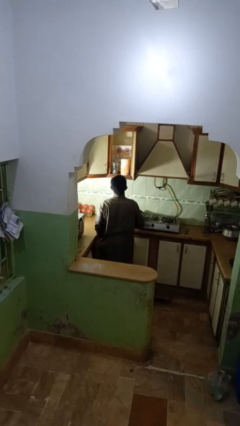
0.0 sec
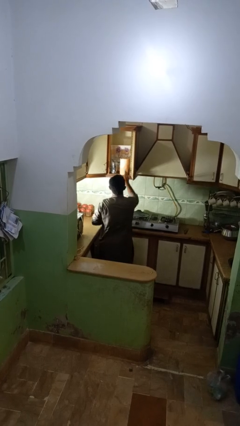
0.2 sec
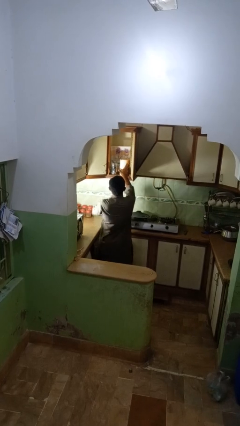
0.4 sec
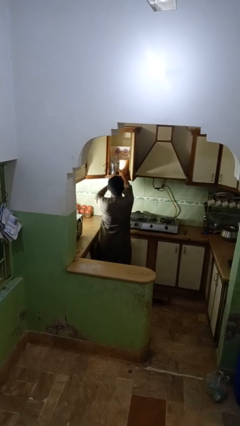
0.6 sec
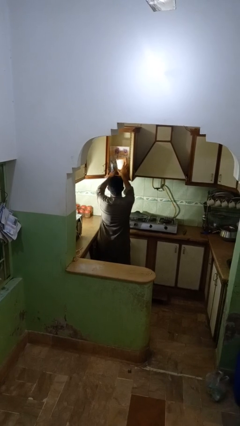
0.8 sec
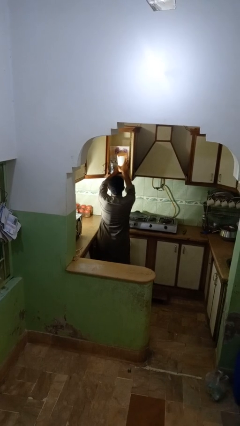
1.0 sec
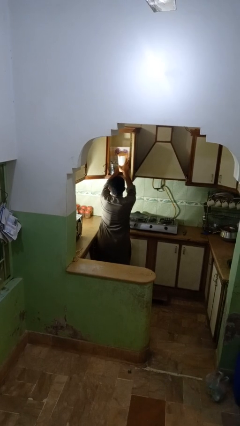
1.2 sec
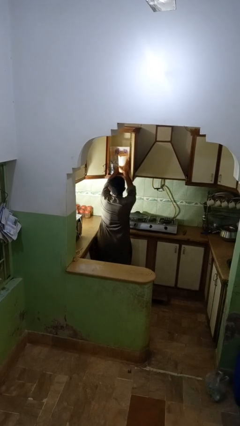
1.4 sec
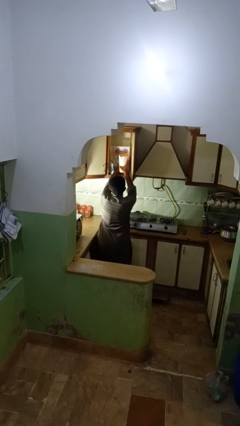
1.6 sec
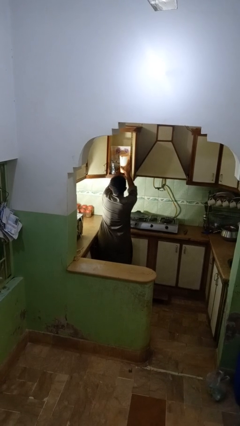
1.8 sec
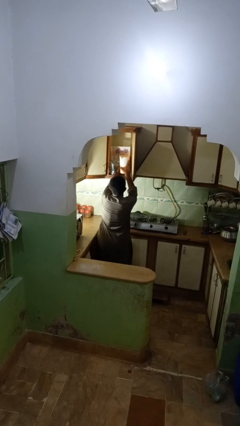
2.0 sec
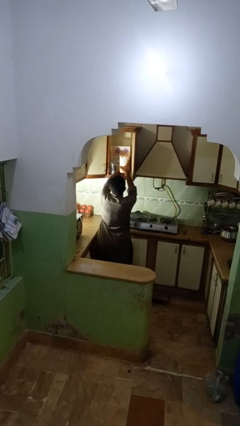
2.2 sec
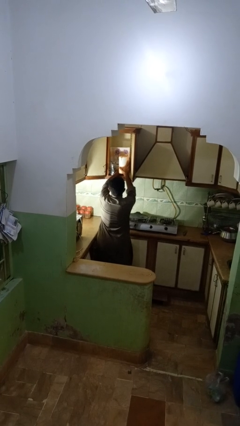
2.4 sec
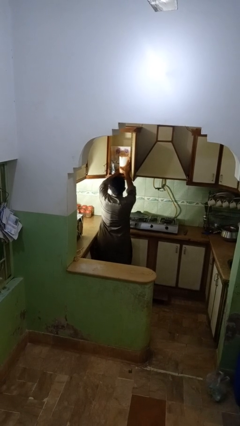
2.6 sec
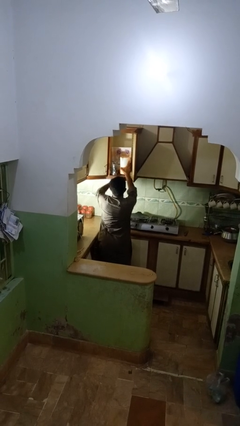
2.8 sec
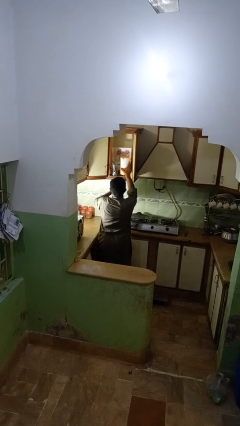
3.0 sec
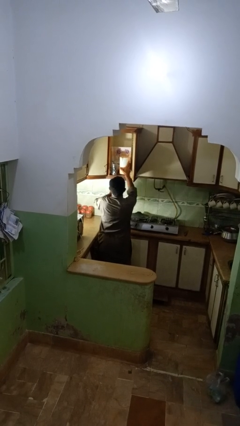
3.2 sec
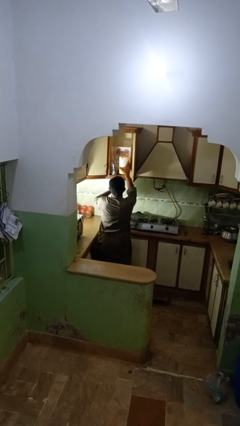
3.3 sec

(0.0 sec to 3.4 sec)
person searches in kitchen drawer

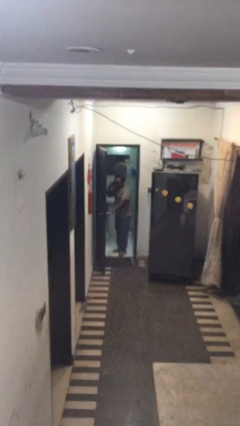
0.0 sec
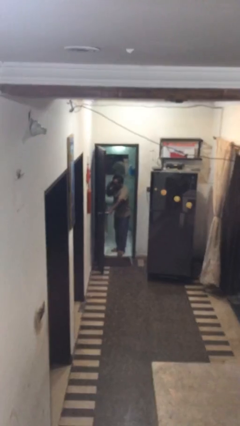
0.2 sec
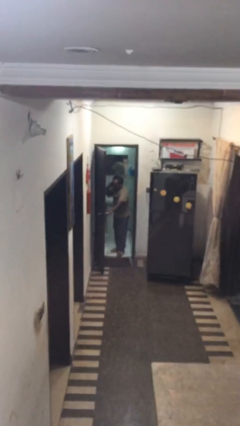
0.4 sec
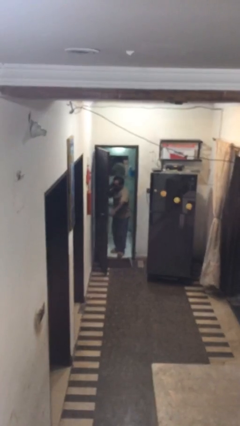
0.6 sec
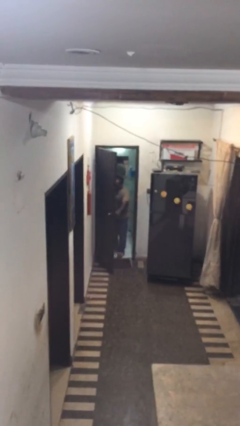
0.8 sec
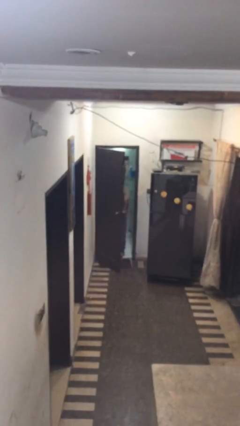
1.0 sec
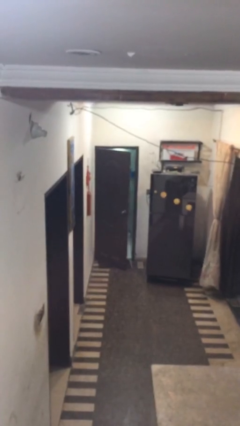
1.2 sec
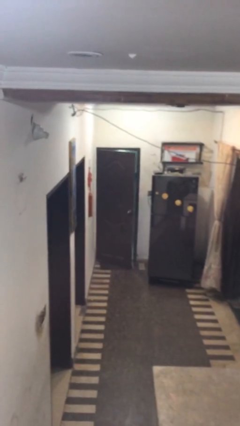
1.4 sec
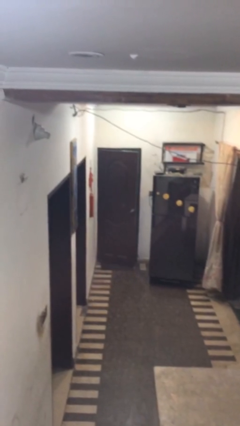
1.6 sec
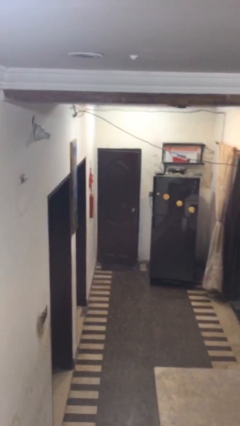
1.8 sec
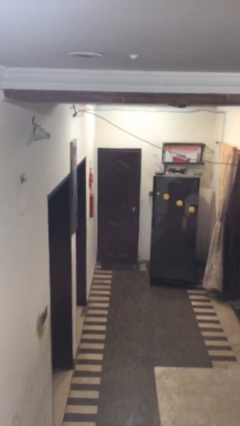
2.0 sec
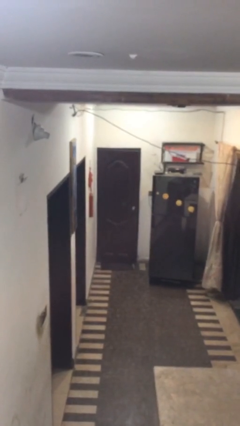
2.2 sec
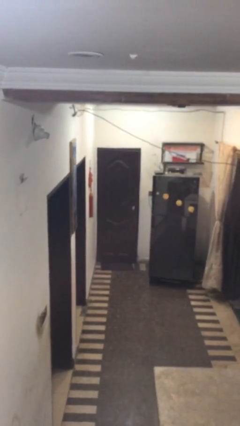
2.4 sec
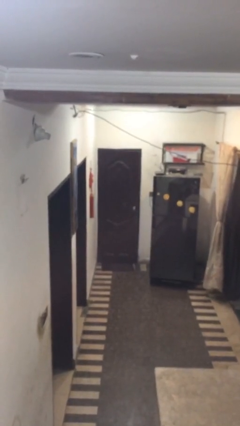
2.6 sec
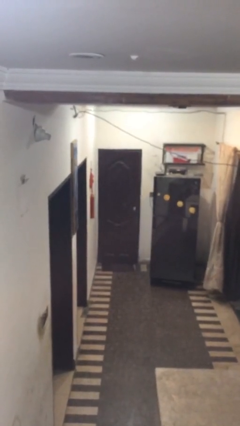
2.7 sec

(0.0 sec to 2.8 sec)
person closes facility door

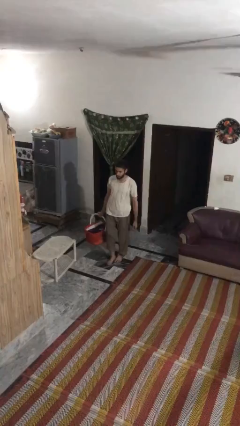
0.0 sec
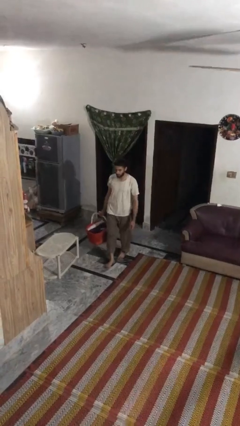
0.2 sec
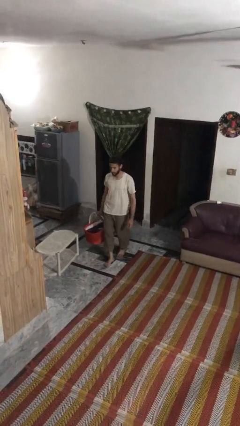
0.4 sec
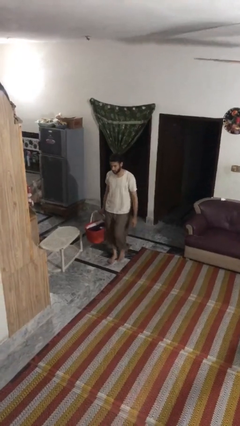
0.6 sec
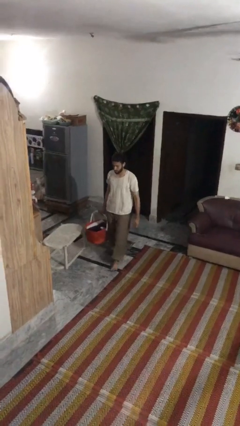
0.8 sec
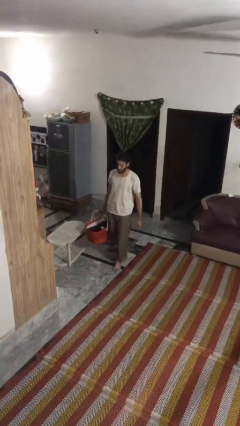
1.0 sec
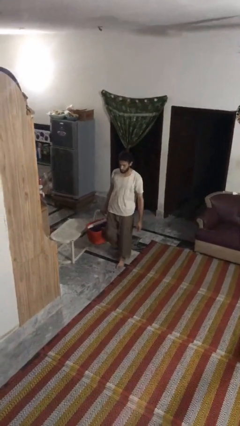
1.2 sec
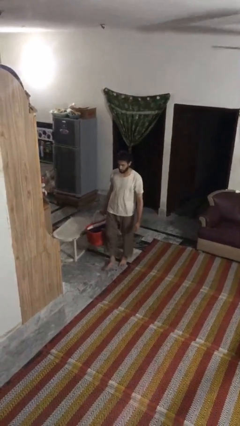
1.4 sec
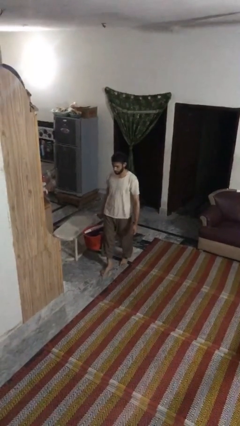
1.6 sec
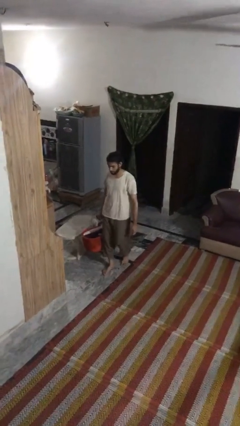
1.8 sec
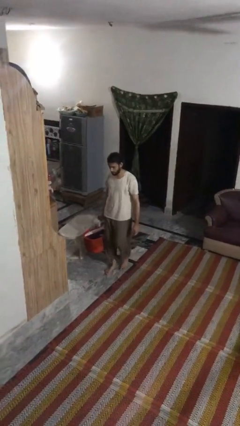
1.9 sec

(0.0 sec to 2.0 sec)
person carries laundry basket

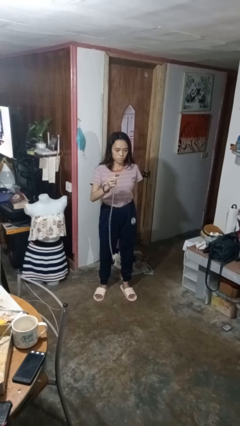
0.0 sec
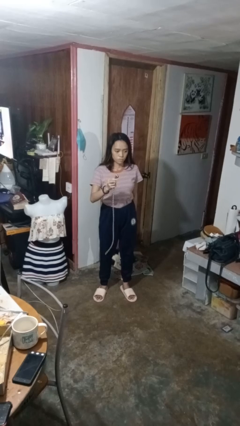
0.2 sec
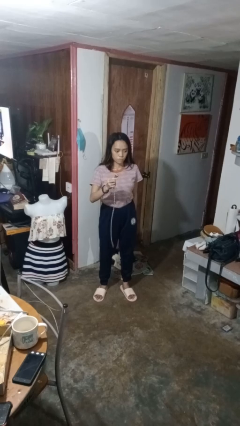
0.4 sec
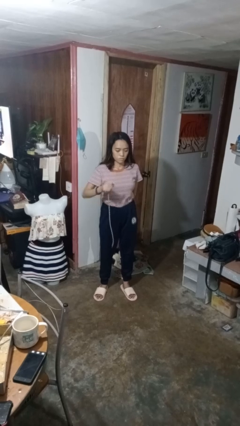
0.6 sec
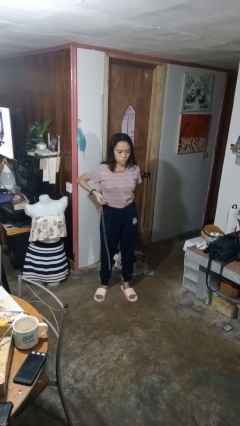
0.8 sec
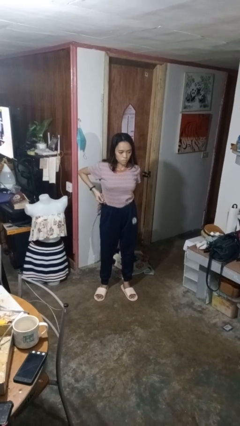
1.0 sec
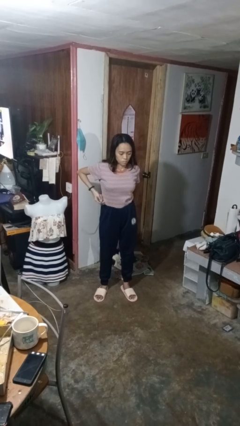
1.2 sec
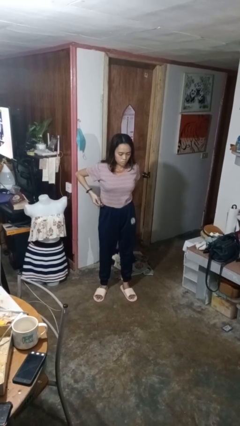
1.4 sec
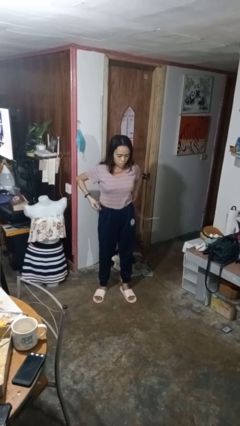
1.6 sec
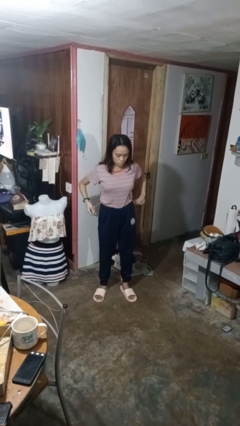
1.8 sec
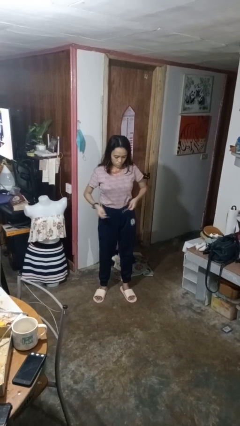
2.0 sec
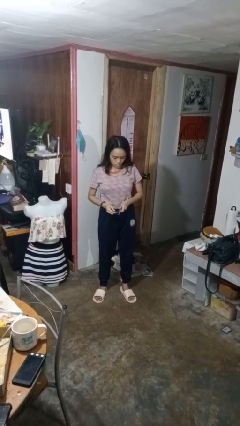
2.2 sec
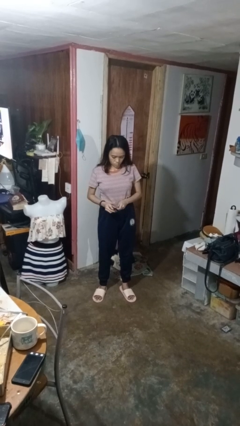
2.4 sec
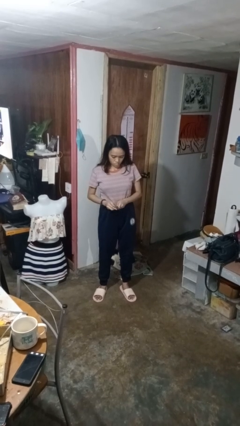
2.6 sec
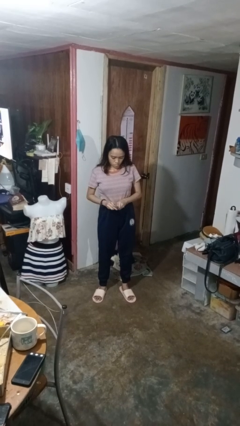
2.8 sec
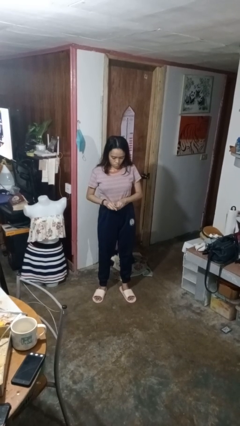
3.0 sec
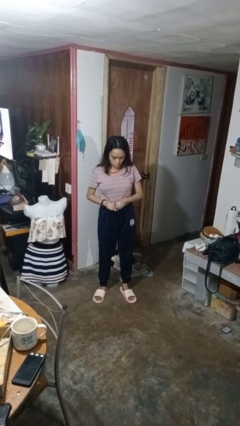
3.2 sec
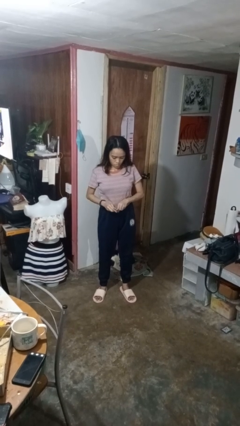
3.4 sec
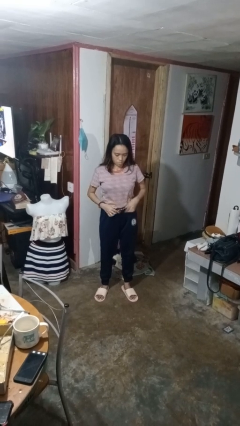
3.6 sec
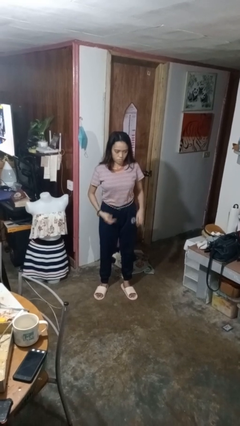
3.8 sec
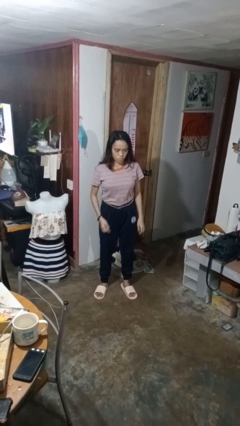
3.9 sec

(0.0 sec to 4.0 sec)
person puts on belt

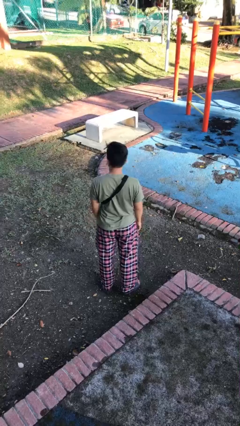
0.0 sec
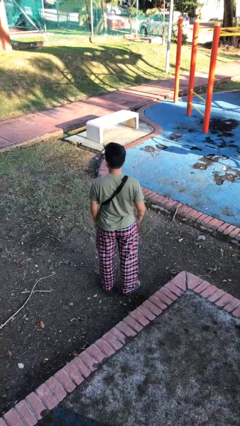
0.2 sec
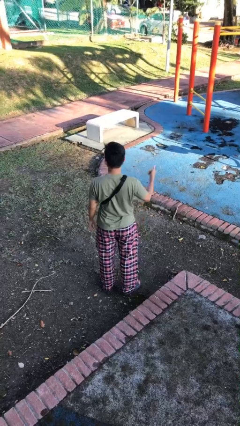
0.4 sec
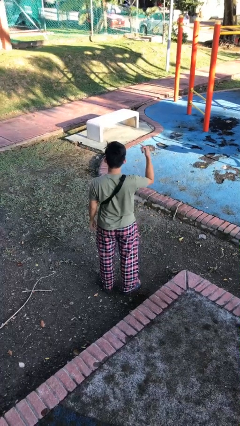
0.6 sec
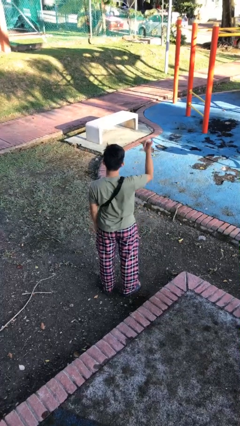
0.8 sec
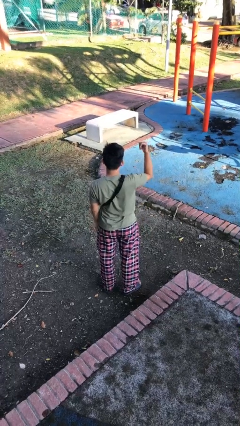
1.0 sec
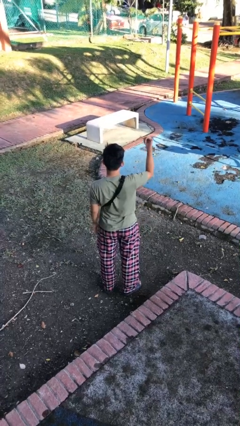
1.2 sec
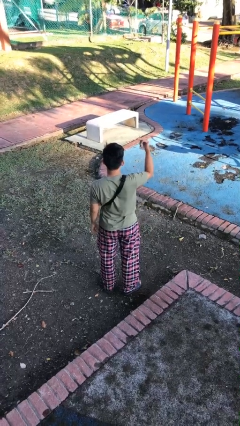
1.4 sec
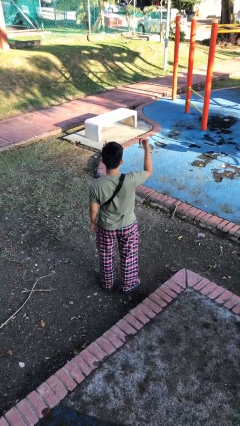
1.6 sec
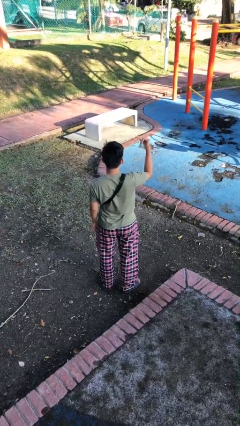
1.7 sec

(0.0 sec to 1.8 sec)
person gestures hang loose

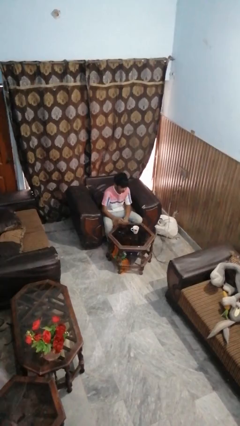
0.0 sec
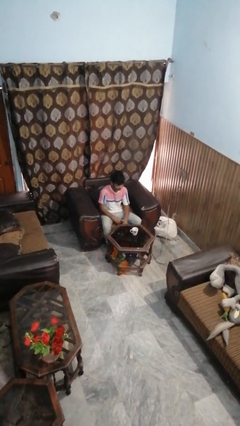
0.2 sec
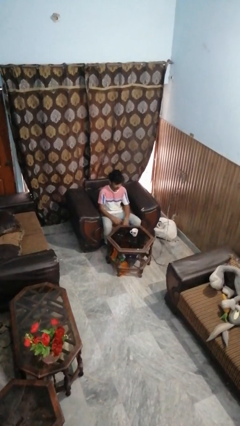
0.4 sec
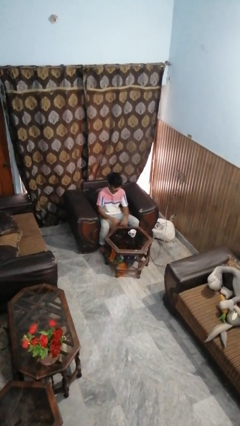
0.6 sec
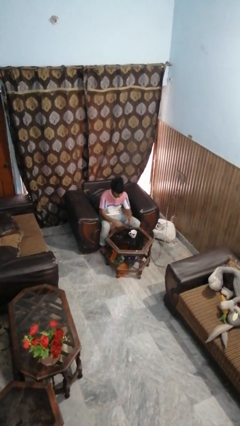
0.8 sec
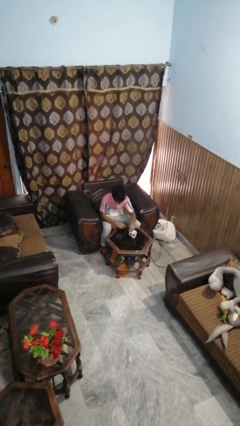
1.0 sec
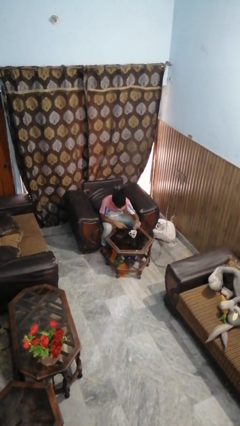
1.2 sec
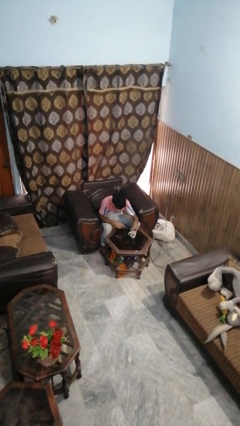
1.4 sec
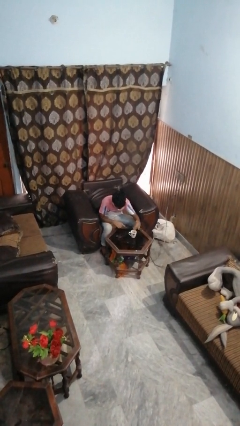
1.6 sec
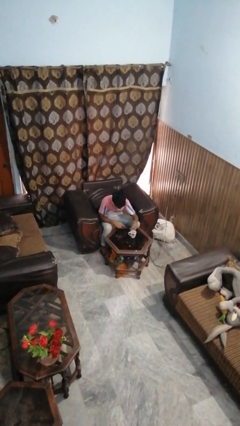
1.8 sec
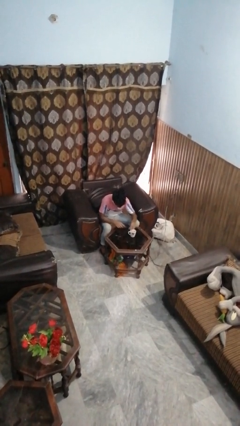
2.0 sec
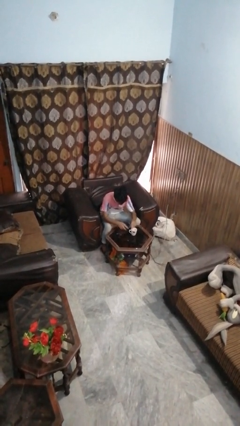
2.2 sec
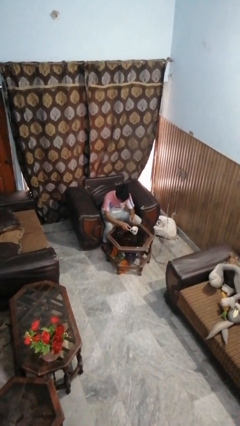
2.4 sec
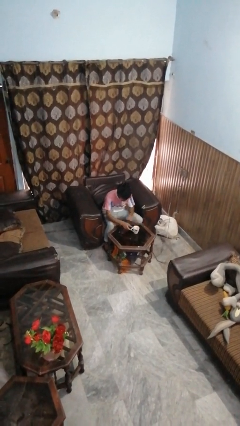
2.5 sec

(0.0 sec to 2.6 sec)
person stirs mug

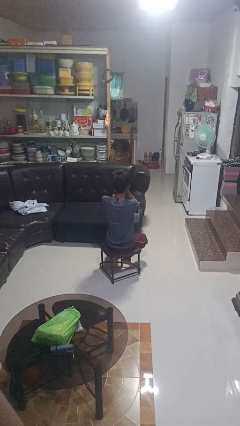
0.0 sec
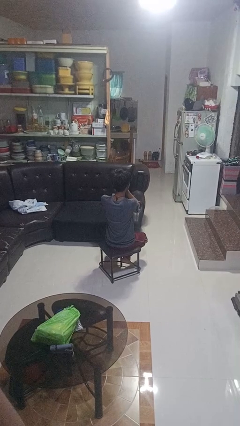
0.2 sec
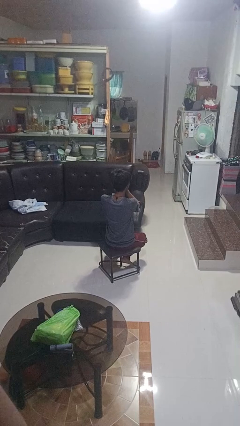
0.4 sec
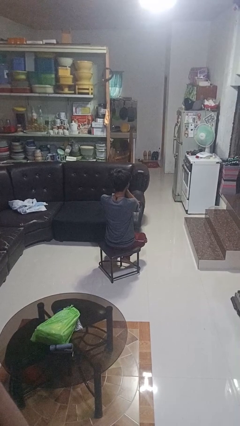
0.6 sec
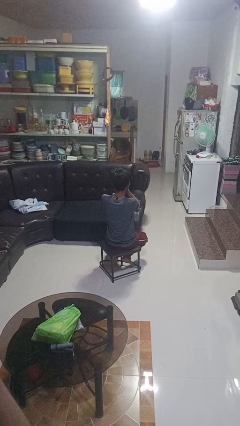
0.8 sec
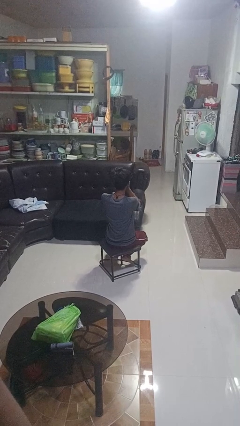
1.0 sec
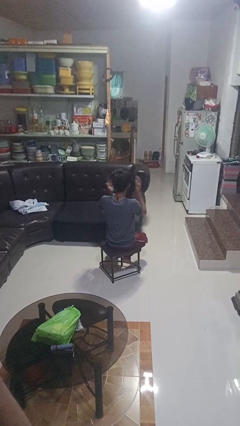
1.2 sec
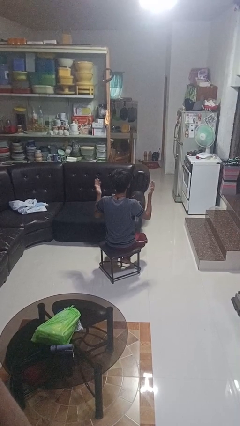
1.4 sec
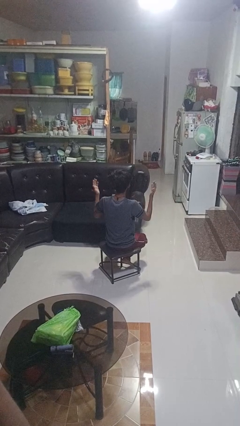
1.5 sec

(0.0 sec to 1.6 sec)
person covers face with hands
